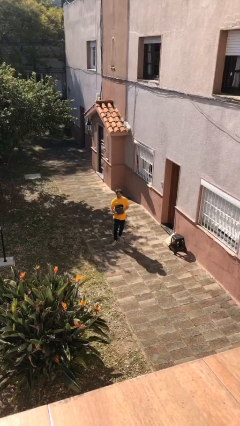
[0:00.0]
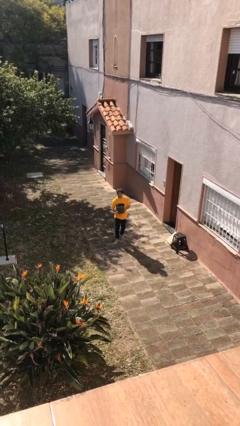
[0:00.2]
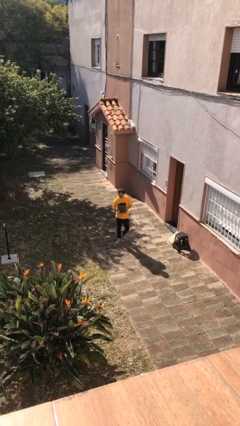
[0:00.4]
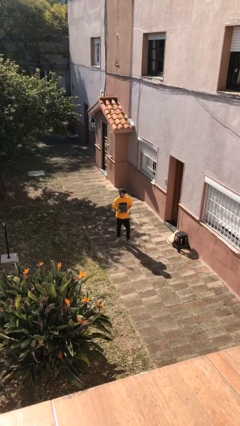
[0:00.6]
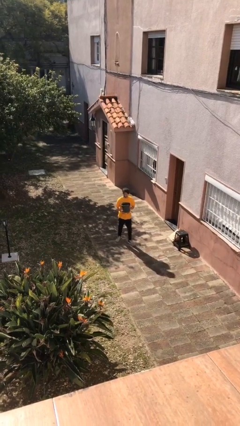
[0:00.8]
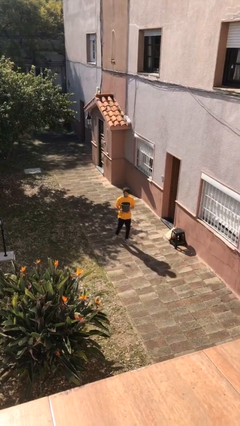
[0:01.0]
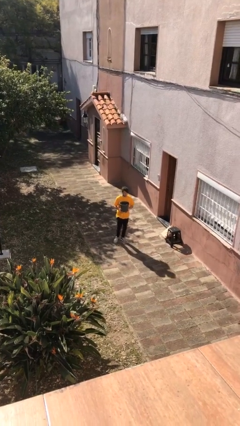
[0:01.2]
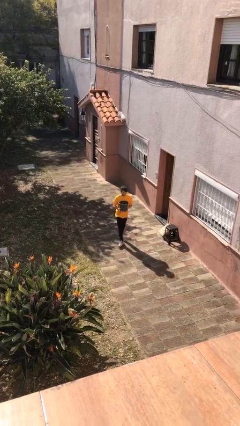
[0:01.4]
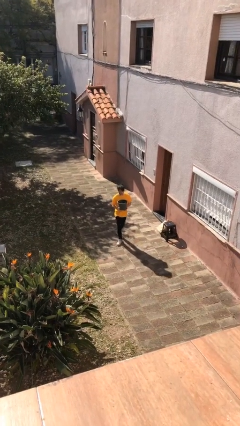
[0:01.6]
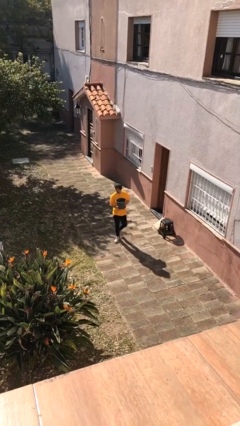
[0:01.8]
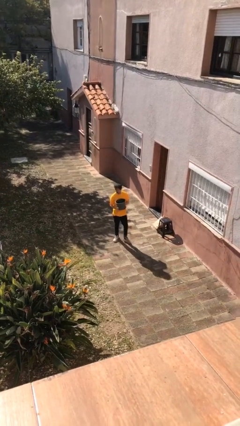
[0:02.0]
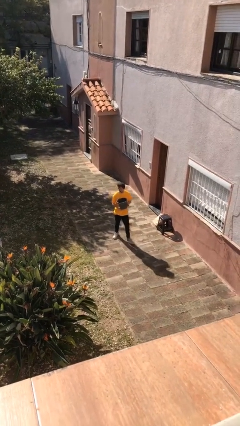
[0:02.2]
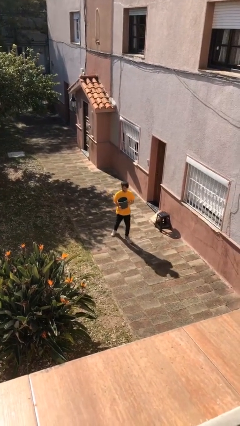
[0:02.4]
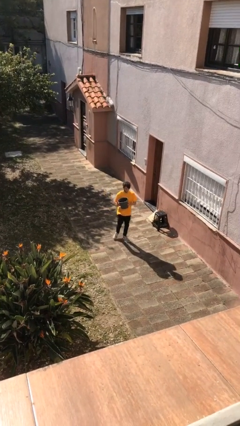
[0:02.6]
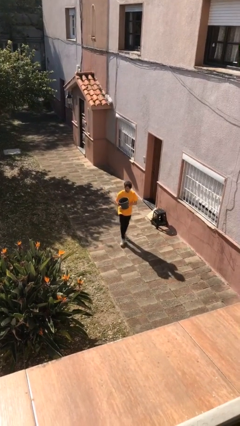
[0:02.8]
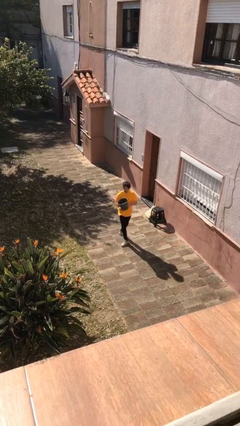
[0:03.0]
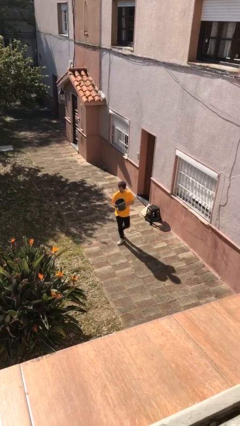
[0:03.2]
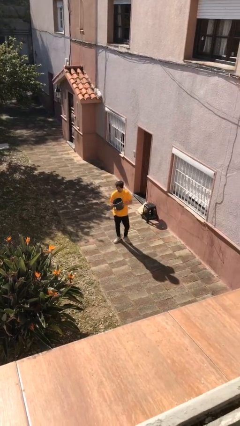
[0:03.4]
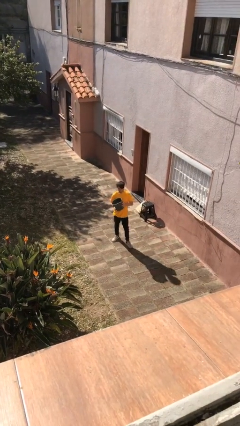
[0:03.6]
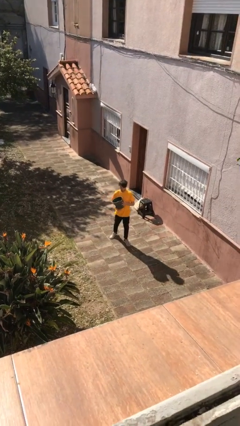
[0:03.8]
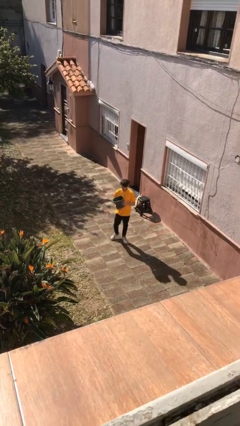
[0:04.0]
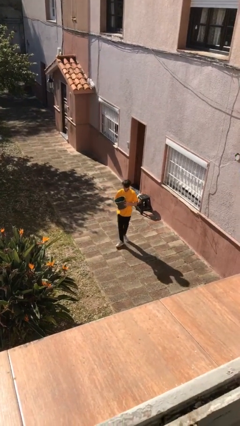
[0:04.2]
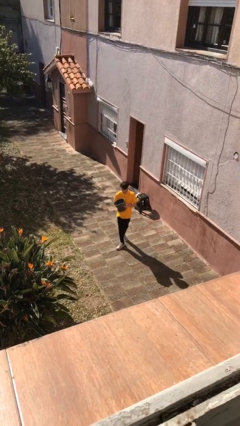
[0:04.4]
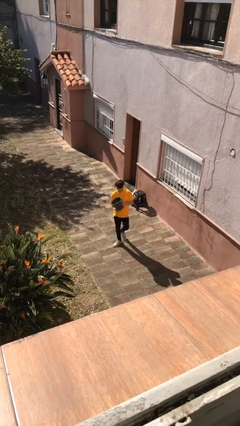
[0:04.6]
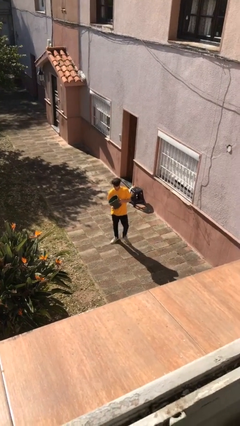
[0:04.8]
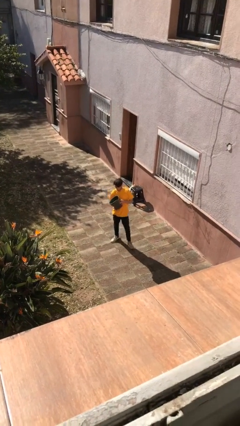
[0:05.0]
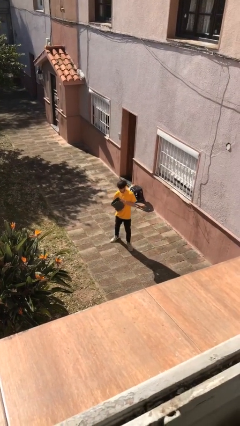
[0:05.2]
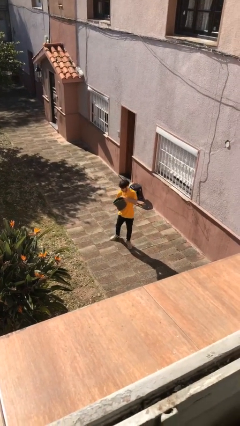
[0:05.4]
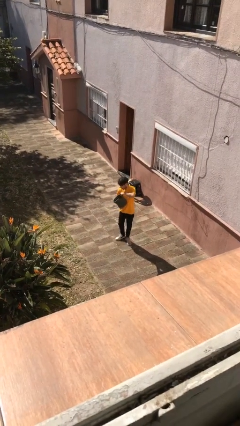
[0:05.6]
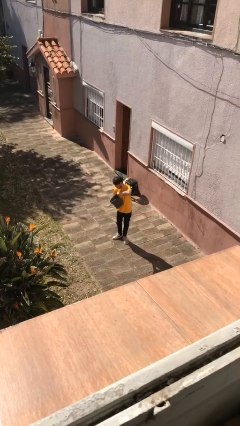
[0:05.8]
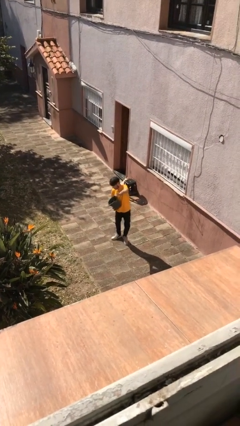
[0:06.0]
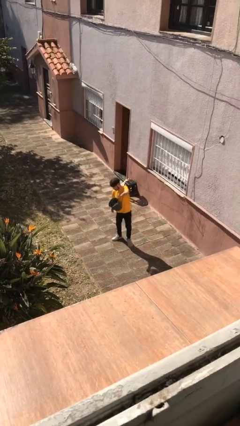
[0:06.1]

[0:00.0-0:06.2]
person carries heavy object

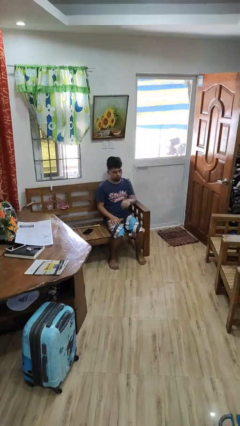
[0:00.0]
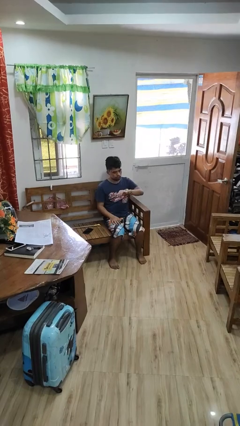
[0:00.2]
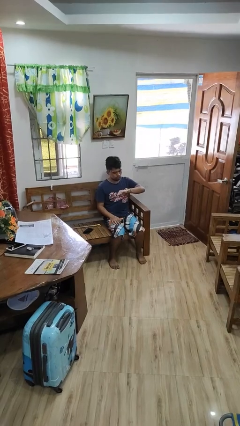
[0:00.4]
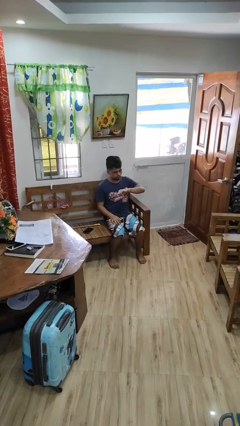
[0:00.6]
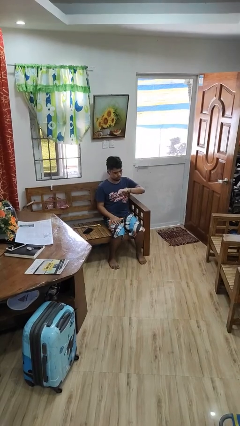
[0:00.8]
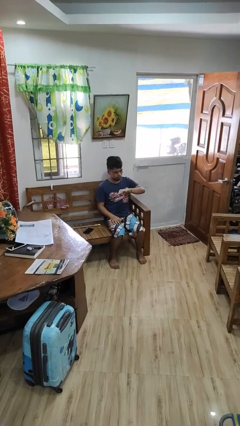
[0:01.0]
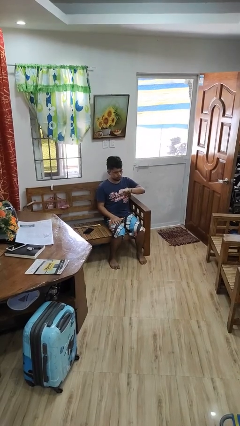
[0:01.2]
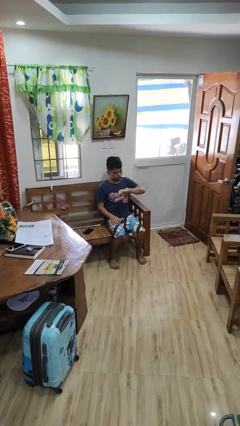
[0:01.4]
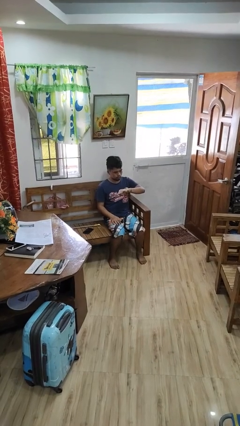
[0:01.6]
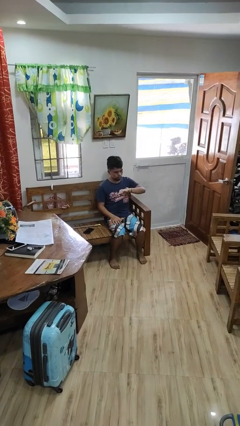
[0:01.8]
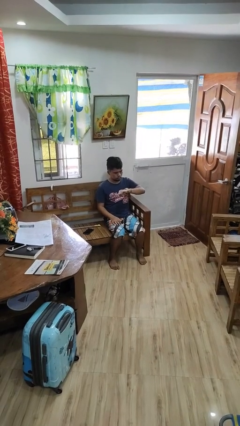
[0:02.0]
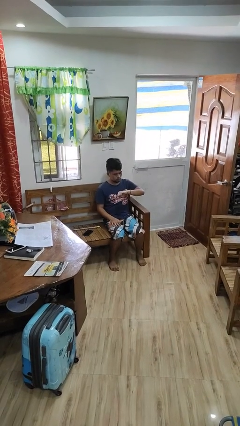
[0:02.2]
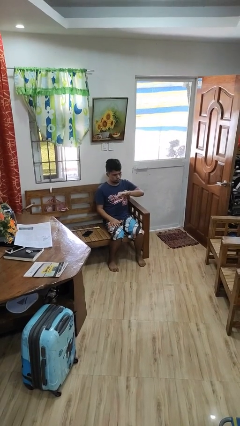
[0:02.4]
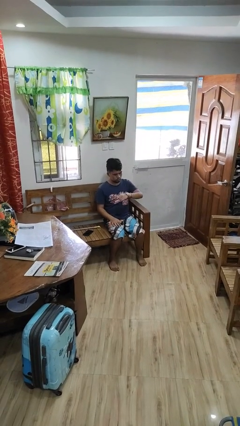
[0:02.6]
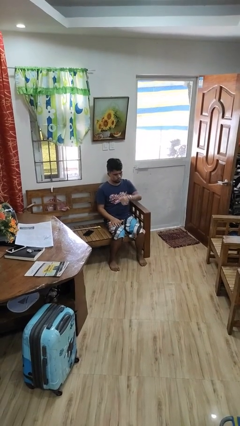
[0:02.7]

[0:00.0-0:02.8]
person looks at wristwatch

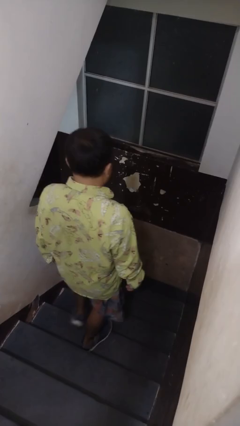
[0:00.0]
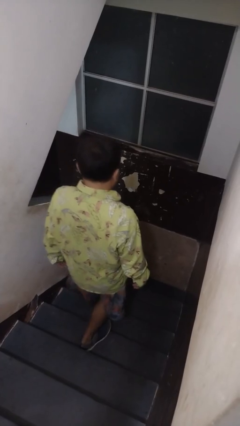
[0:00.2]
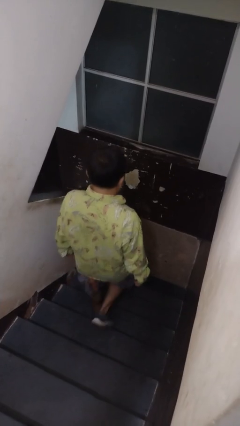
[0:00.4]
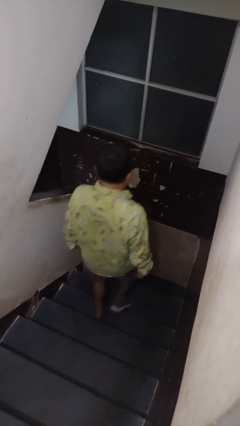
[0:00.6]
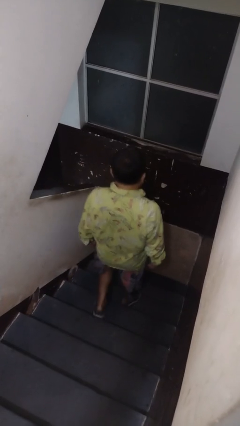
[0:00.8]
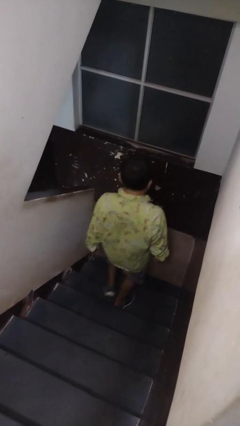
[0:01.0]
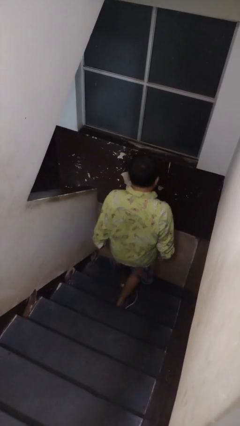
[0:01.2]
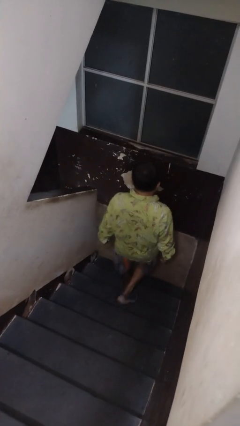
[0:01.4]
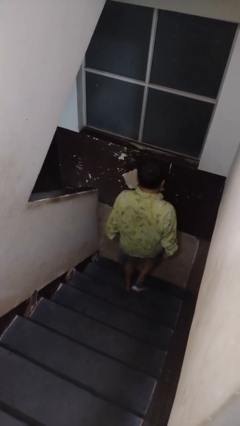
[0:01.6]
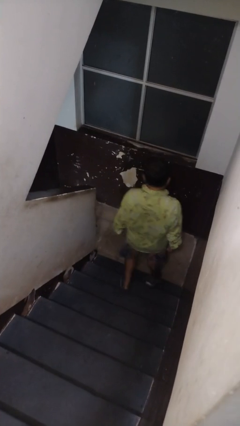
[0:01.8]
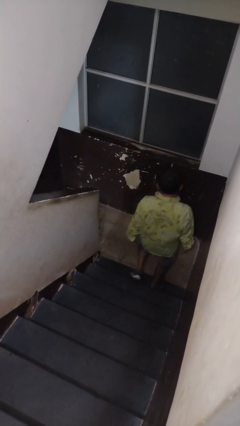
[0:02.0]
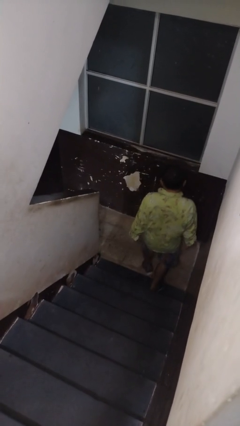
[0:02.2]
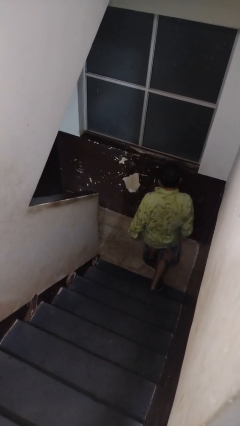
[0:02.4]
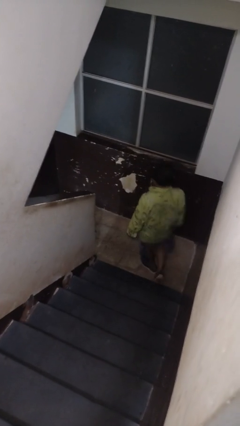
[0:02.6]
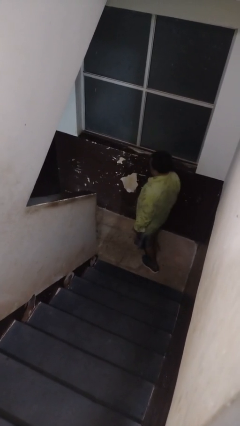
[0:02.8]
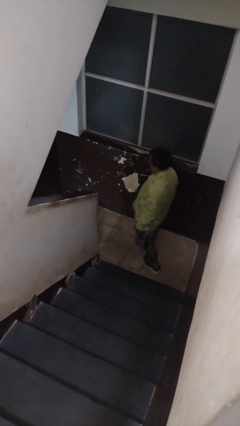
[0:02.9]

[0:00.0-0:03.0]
person climbs down stairs

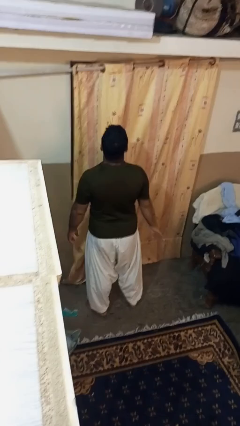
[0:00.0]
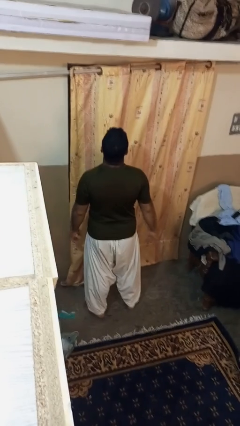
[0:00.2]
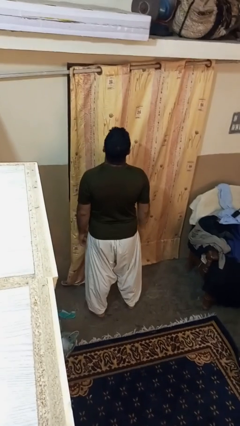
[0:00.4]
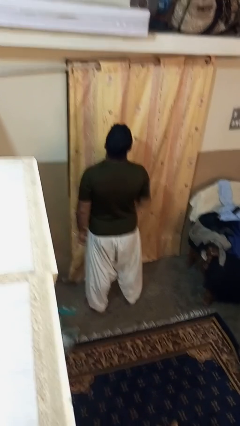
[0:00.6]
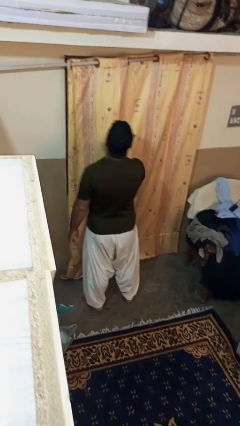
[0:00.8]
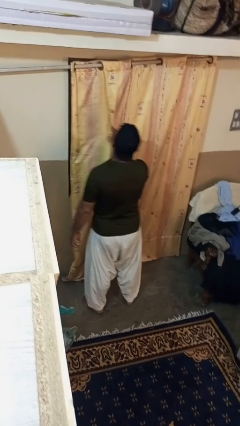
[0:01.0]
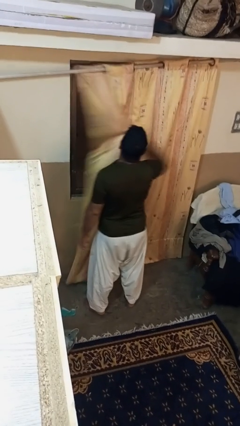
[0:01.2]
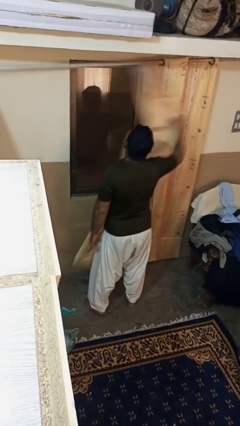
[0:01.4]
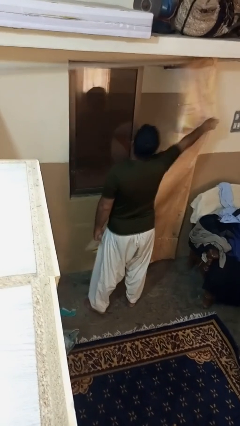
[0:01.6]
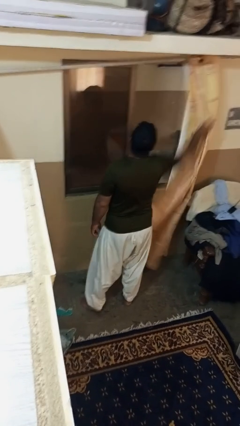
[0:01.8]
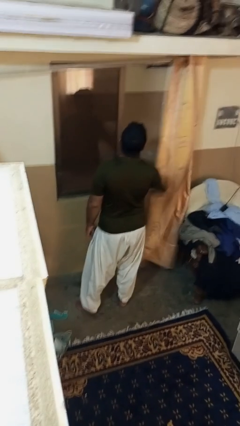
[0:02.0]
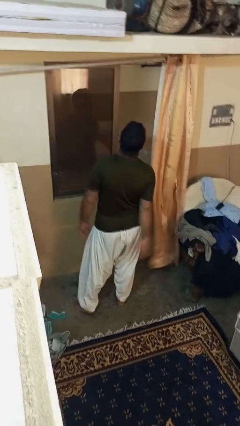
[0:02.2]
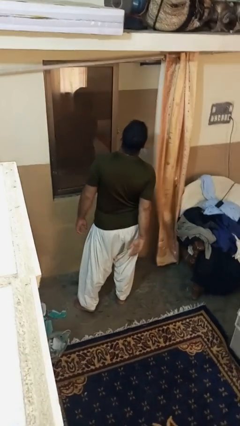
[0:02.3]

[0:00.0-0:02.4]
person opens curtains

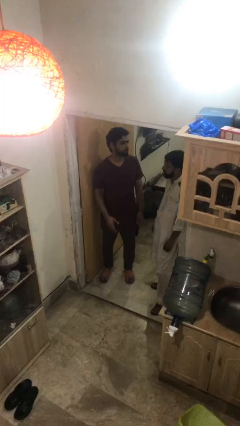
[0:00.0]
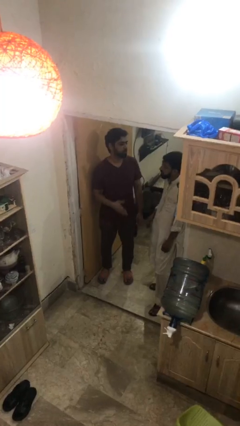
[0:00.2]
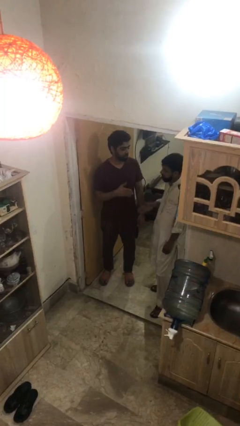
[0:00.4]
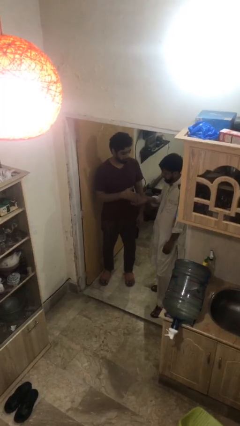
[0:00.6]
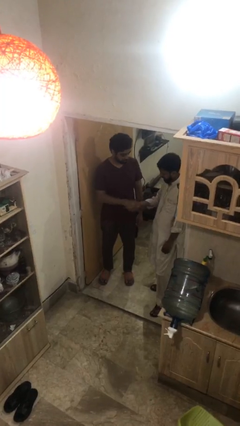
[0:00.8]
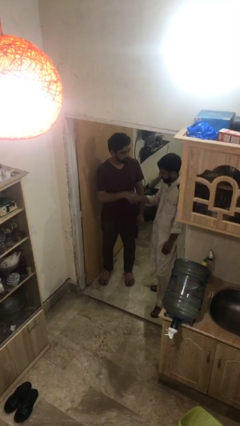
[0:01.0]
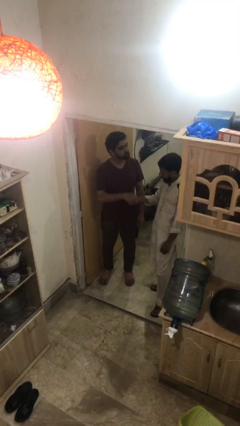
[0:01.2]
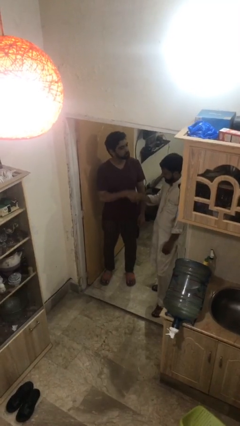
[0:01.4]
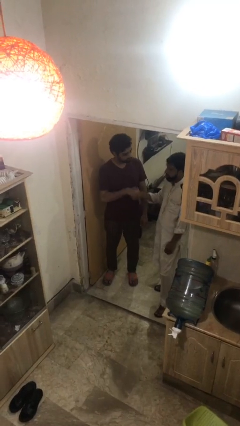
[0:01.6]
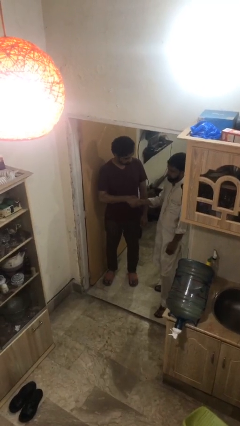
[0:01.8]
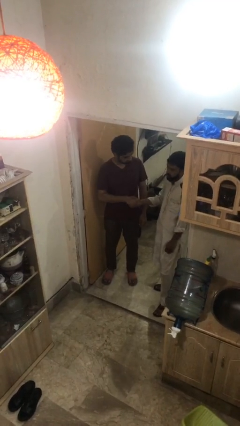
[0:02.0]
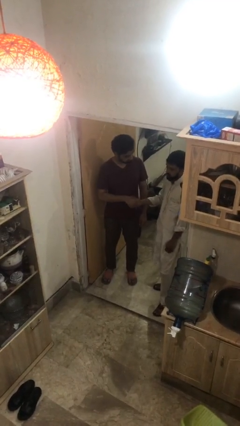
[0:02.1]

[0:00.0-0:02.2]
person shakes hand

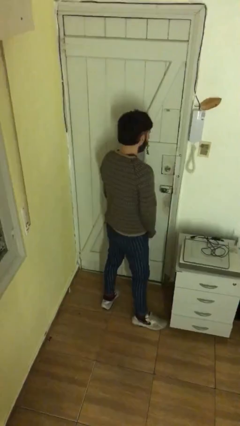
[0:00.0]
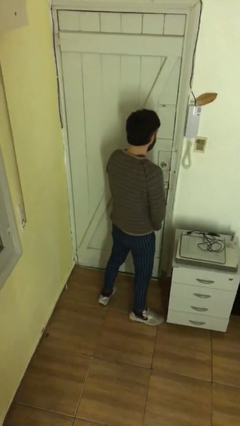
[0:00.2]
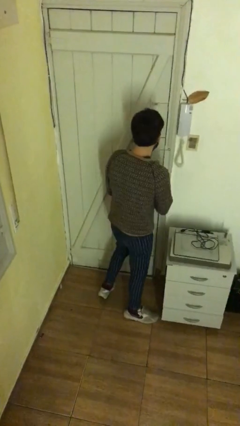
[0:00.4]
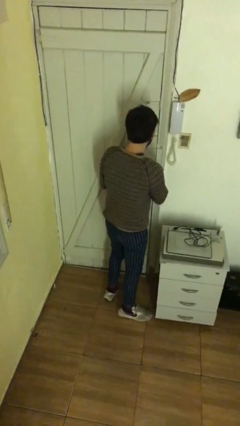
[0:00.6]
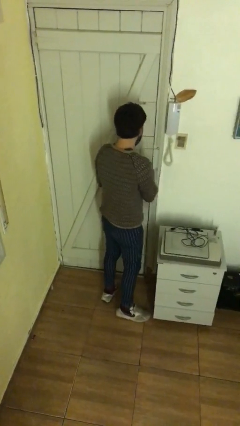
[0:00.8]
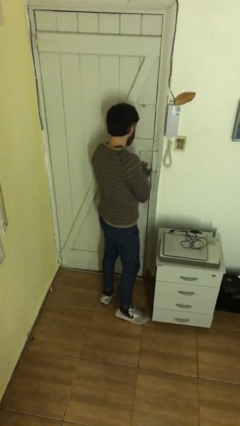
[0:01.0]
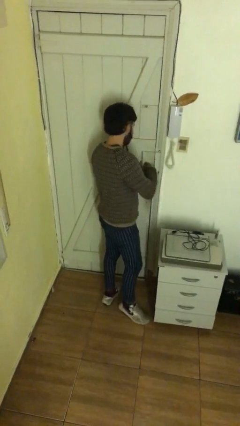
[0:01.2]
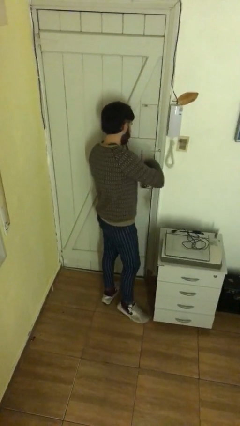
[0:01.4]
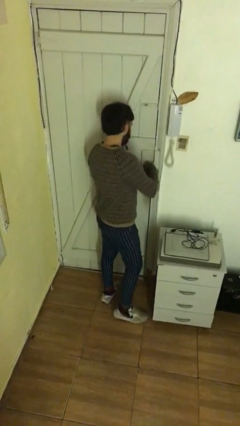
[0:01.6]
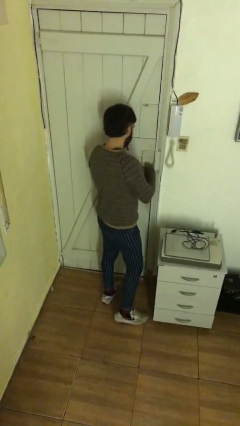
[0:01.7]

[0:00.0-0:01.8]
person locks door with keys
